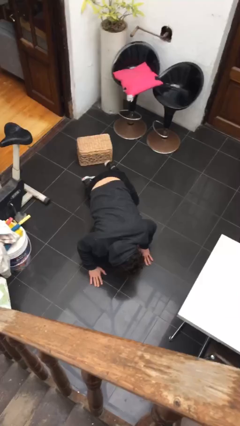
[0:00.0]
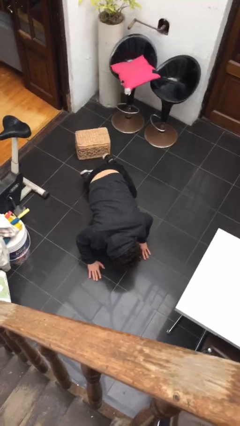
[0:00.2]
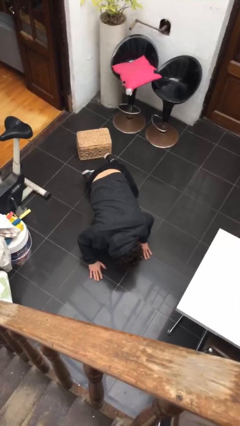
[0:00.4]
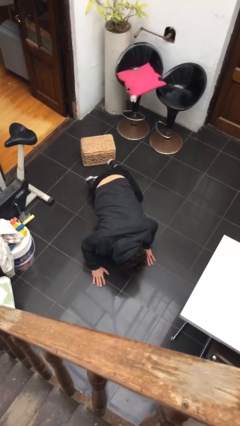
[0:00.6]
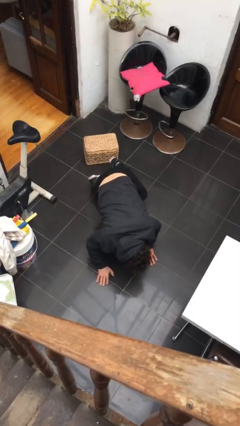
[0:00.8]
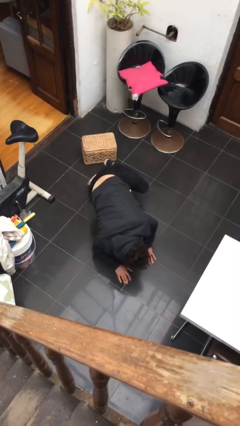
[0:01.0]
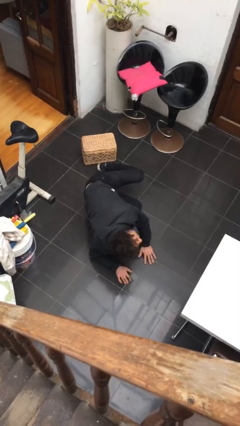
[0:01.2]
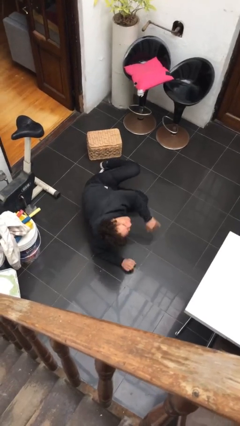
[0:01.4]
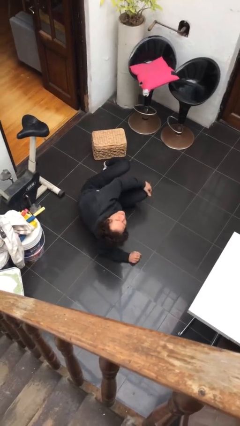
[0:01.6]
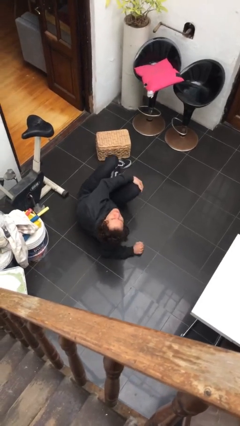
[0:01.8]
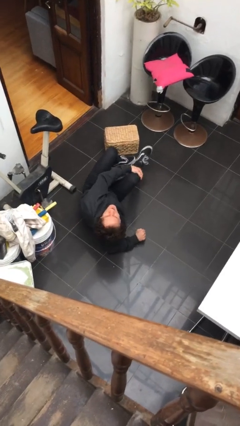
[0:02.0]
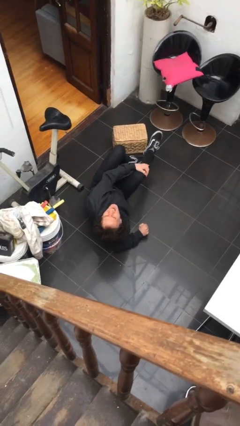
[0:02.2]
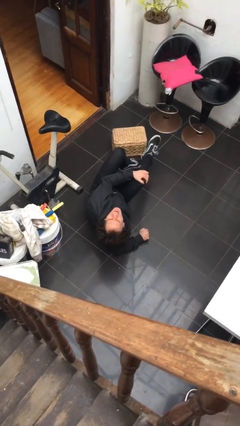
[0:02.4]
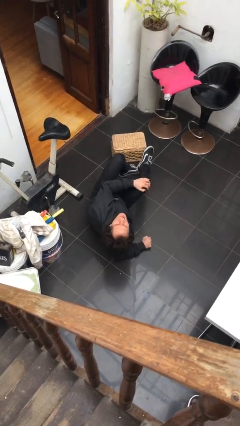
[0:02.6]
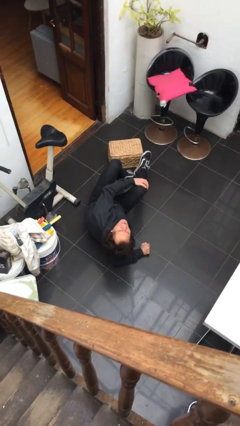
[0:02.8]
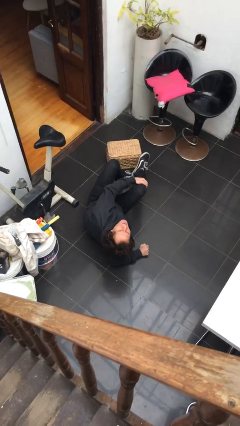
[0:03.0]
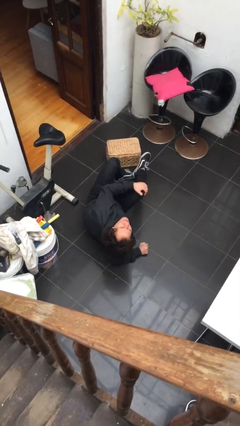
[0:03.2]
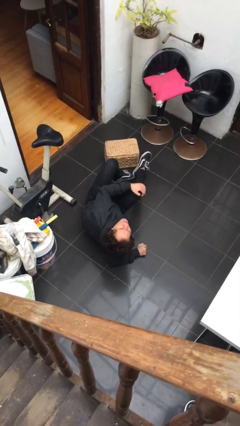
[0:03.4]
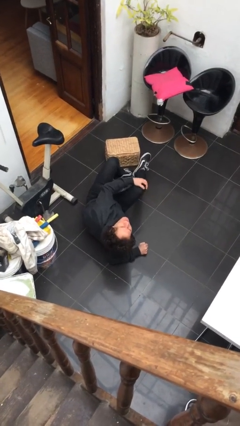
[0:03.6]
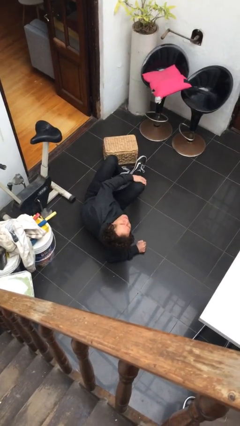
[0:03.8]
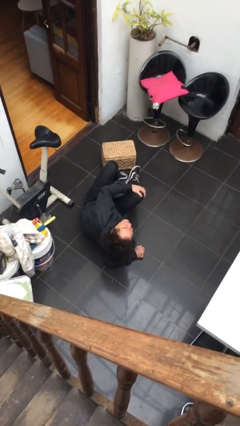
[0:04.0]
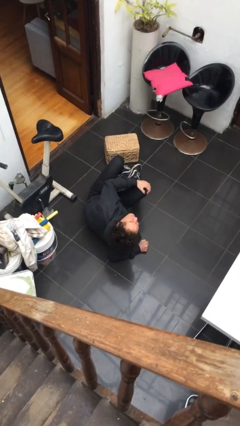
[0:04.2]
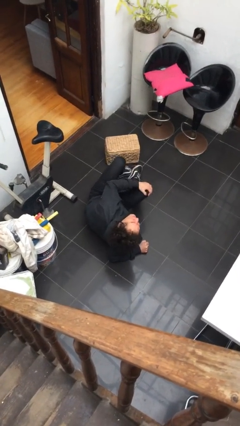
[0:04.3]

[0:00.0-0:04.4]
person lies down on floor

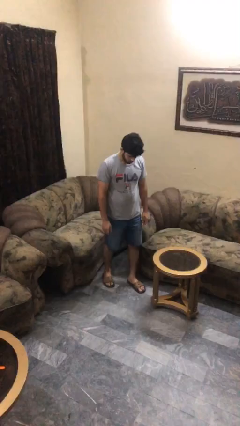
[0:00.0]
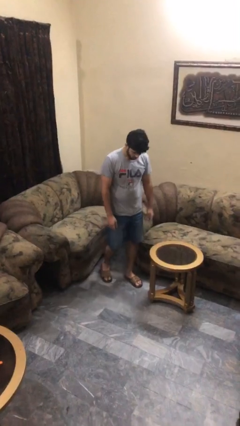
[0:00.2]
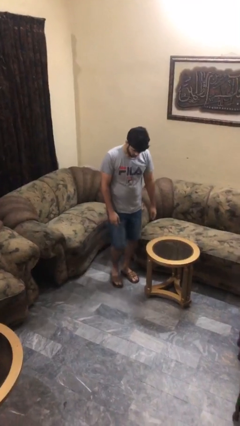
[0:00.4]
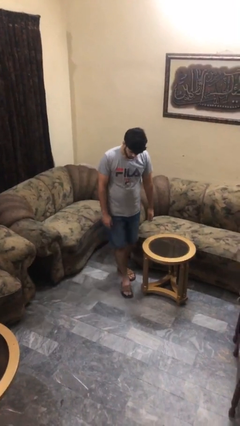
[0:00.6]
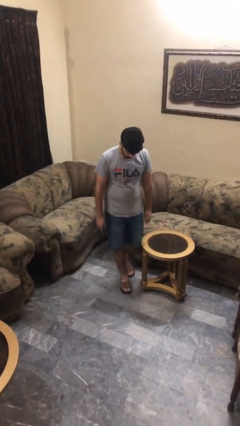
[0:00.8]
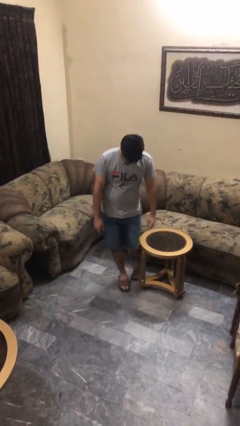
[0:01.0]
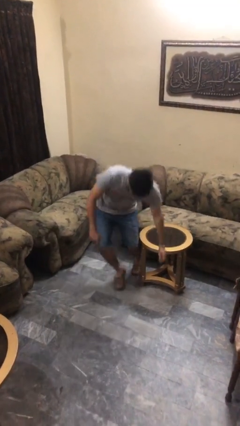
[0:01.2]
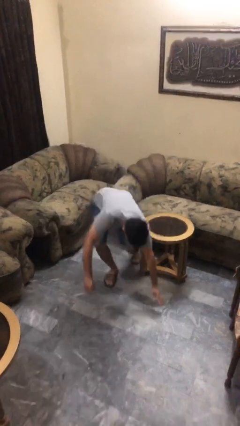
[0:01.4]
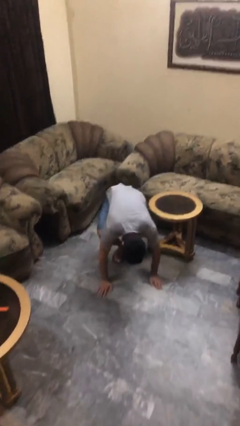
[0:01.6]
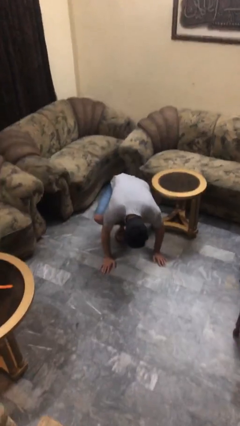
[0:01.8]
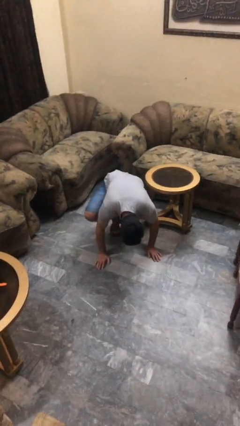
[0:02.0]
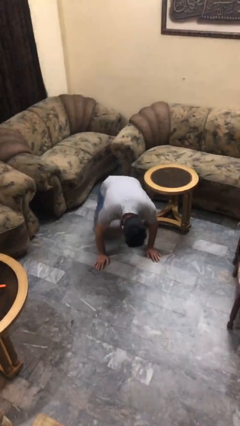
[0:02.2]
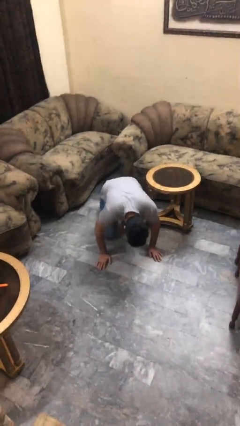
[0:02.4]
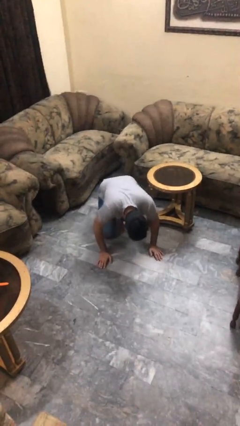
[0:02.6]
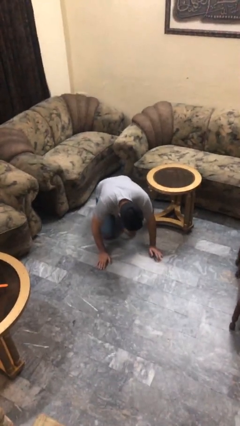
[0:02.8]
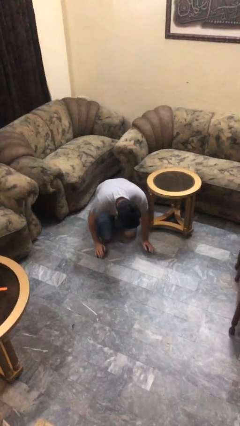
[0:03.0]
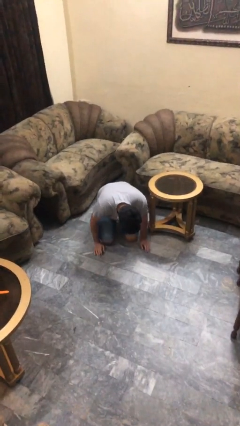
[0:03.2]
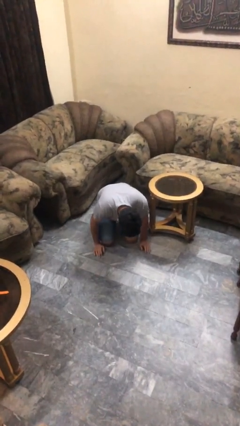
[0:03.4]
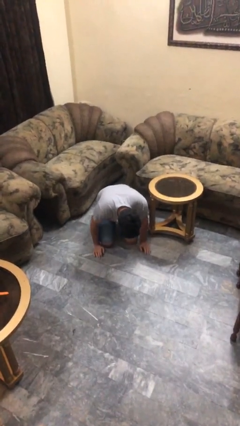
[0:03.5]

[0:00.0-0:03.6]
person trips on object on floor

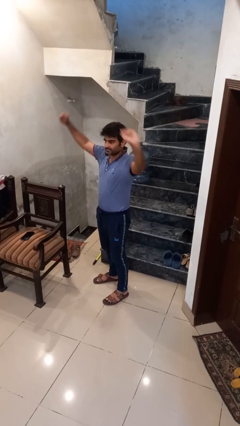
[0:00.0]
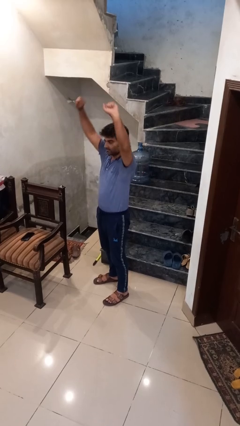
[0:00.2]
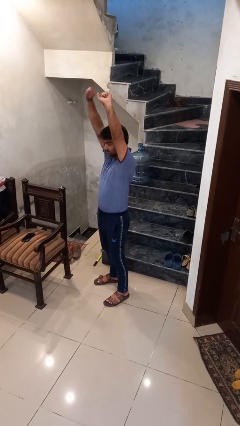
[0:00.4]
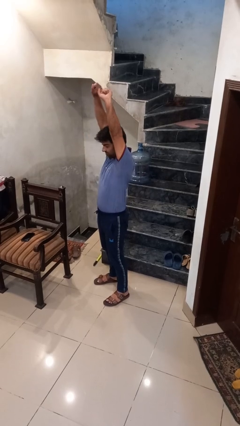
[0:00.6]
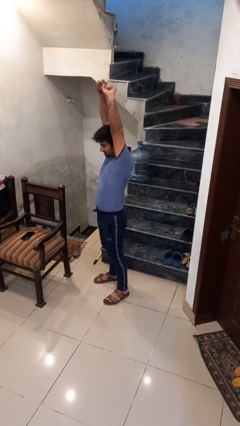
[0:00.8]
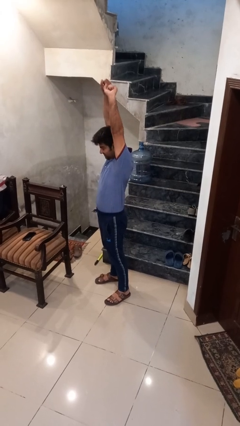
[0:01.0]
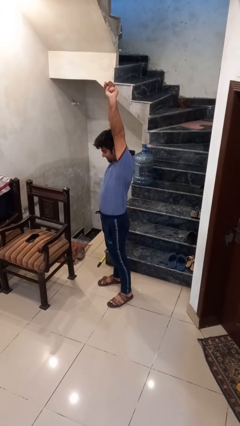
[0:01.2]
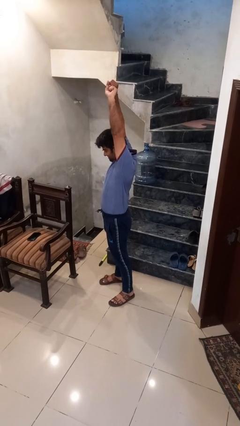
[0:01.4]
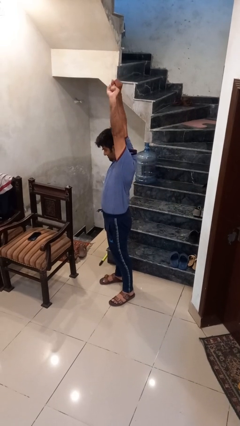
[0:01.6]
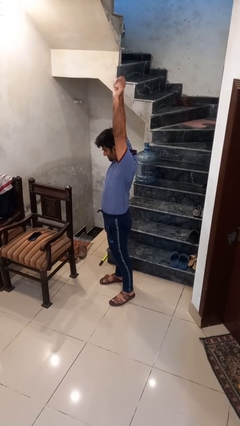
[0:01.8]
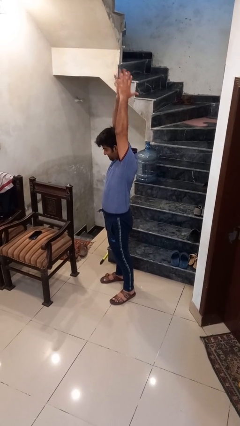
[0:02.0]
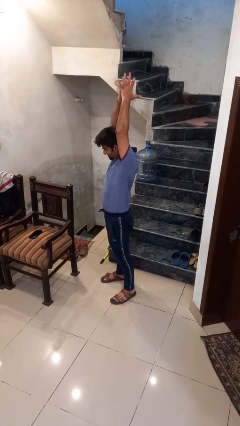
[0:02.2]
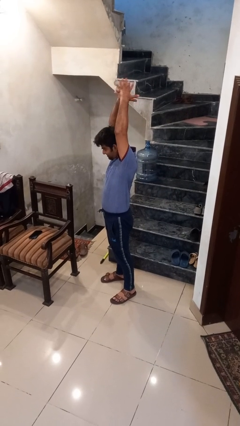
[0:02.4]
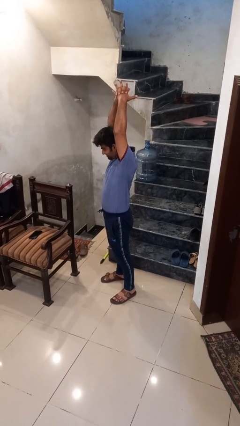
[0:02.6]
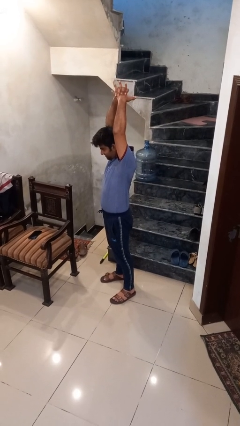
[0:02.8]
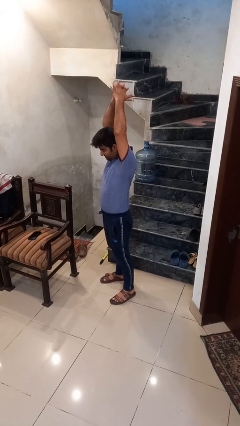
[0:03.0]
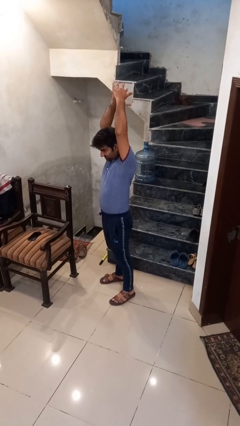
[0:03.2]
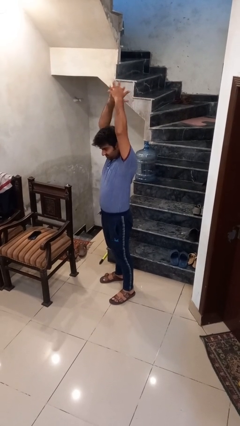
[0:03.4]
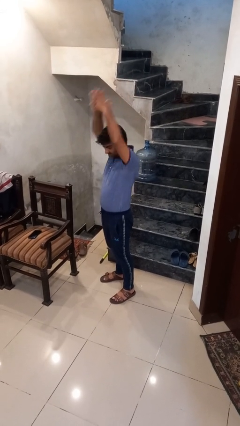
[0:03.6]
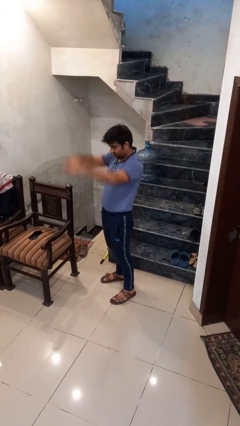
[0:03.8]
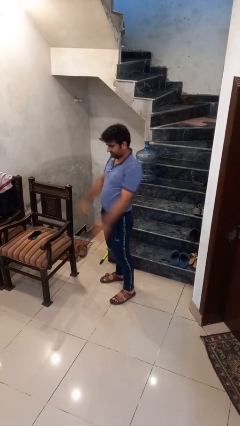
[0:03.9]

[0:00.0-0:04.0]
person stretches arms over head

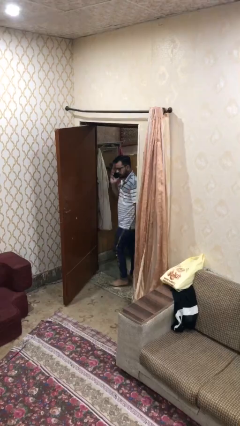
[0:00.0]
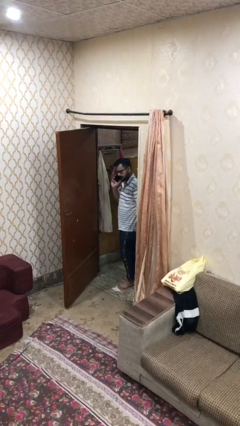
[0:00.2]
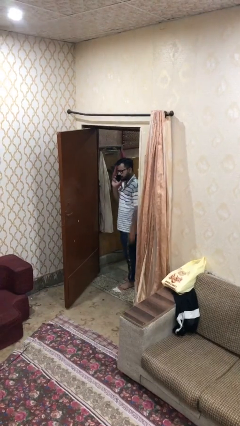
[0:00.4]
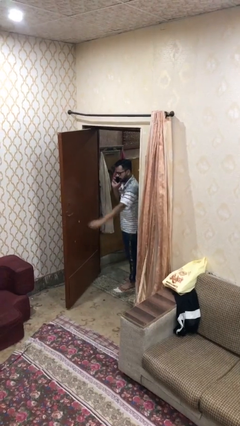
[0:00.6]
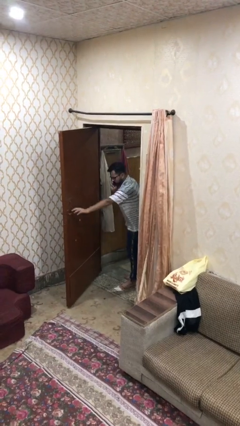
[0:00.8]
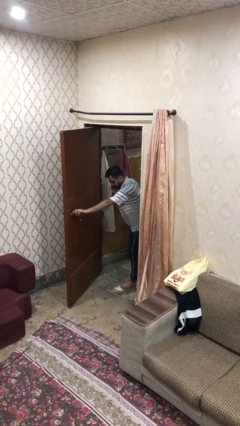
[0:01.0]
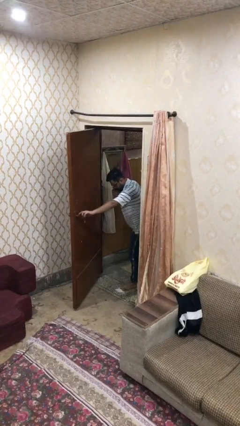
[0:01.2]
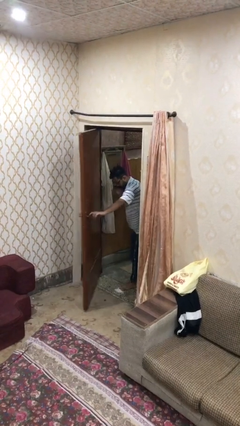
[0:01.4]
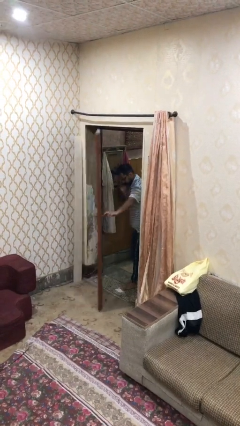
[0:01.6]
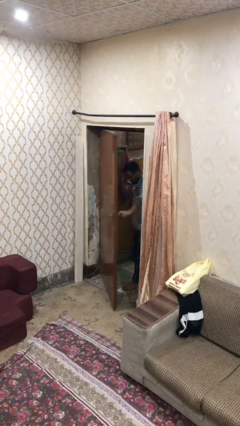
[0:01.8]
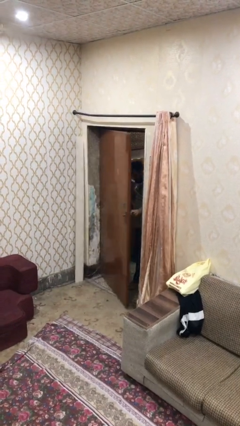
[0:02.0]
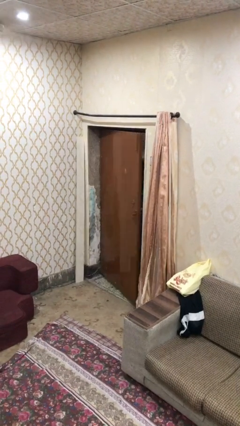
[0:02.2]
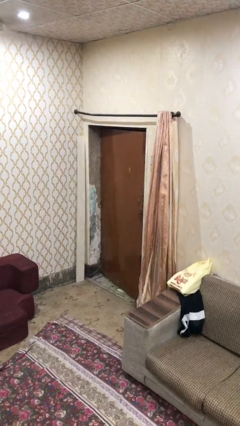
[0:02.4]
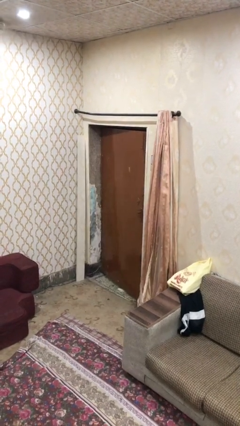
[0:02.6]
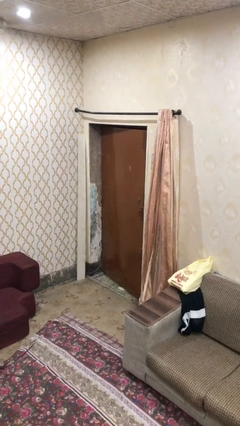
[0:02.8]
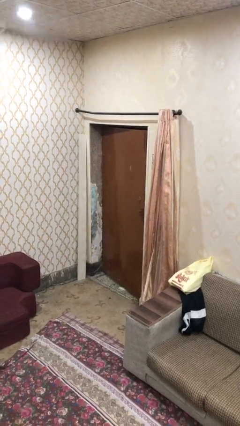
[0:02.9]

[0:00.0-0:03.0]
person closes facility door

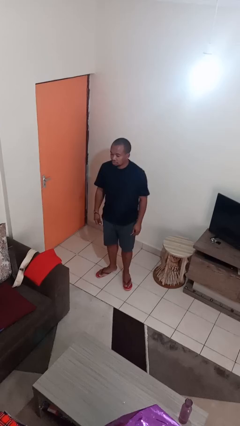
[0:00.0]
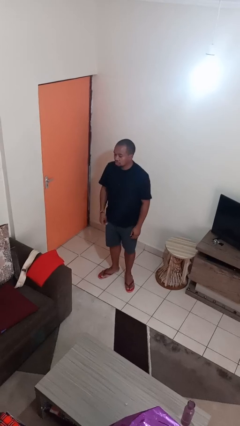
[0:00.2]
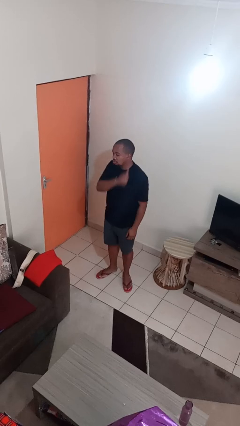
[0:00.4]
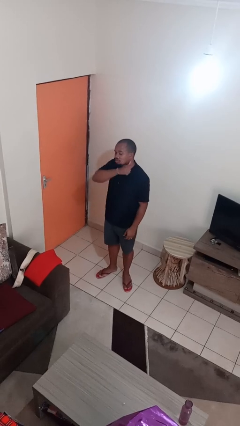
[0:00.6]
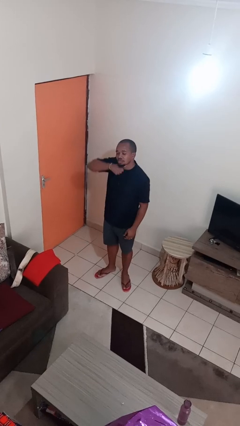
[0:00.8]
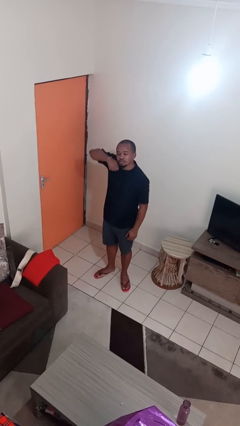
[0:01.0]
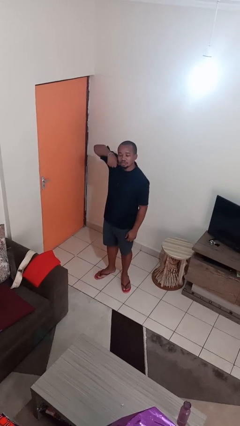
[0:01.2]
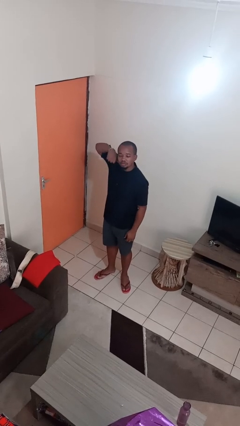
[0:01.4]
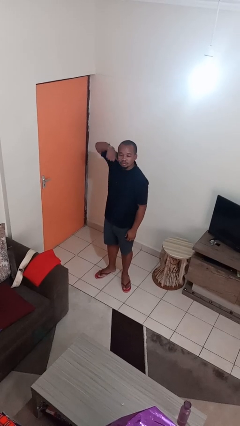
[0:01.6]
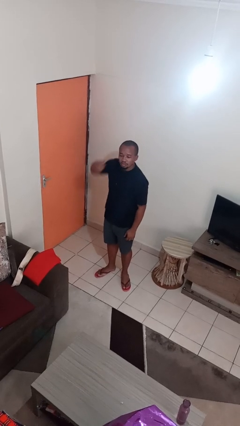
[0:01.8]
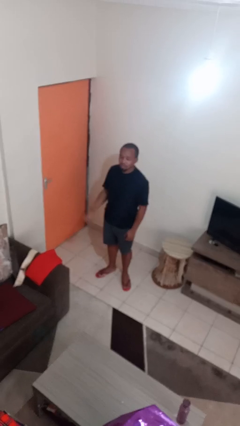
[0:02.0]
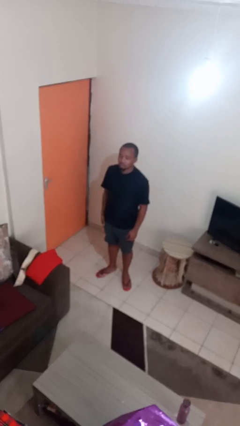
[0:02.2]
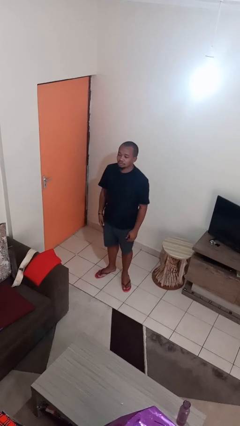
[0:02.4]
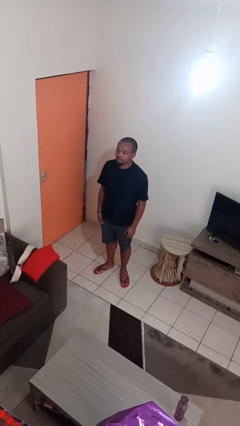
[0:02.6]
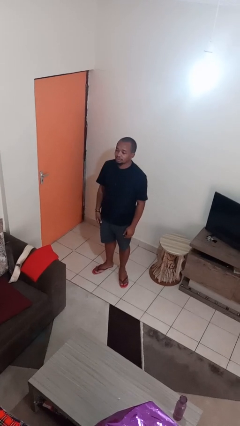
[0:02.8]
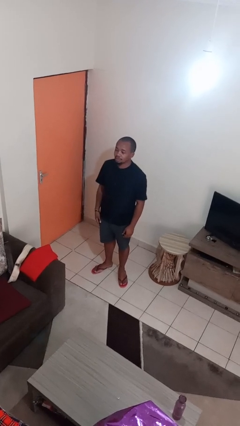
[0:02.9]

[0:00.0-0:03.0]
person gestures cut
